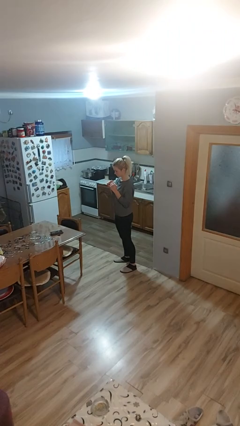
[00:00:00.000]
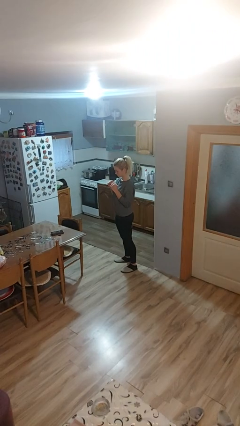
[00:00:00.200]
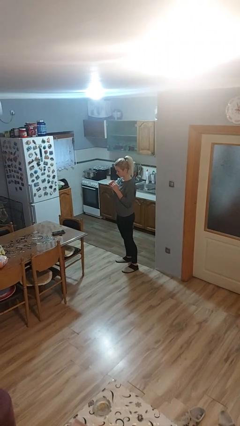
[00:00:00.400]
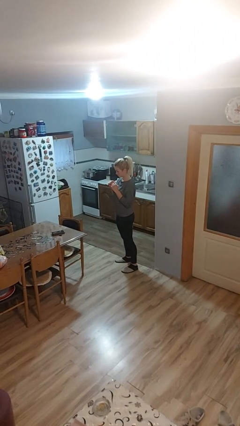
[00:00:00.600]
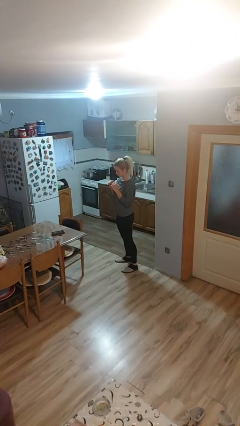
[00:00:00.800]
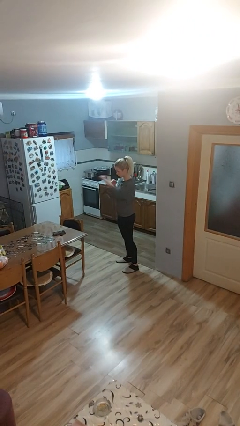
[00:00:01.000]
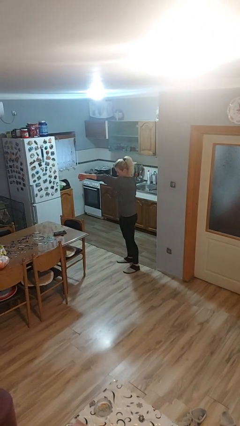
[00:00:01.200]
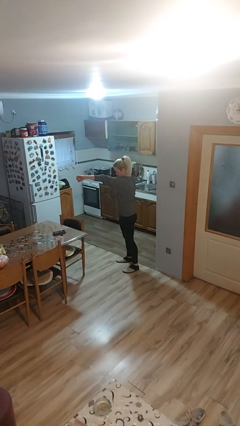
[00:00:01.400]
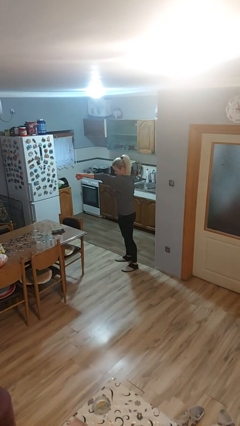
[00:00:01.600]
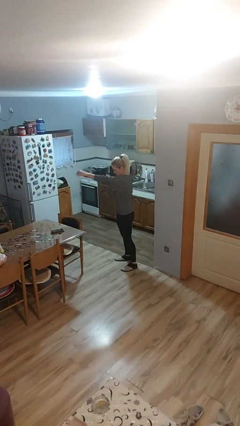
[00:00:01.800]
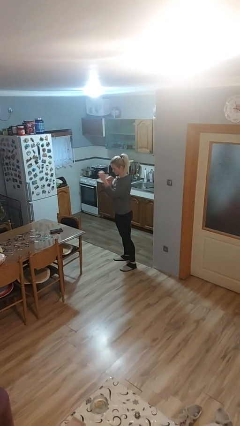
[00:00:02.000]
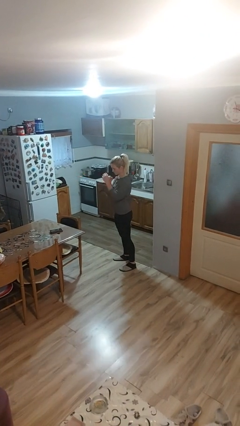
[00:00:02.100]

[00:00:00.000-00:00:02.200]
person punches

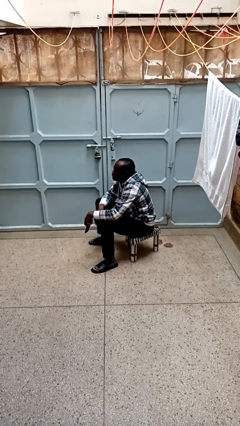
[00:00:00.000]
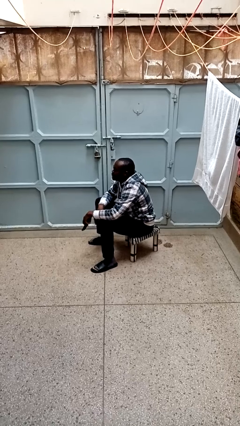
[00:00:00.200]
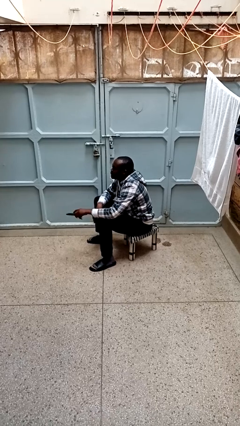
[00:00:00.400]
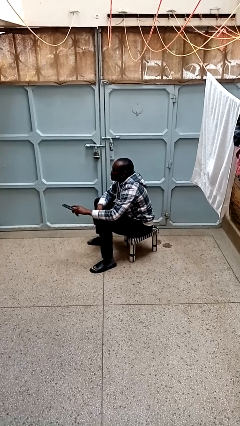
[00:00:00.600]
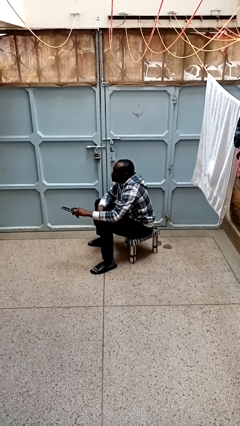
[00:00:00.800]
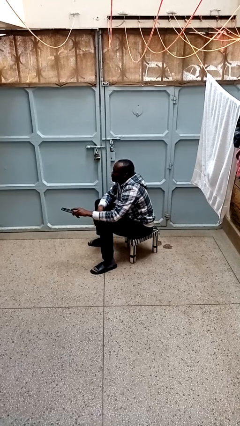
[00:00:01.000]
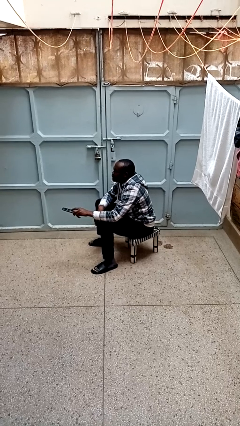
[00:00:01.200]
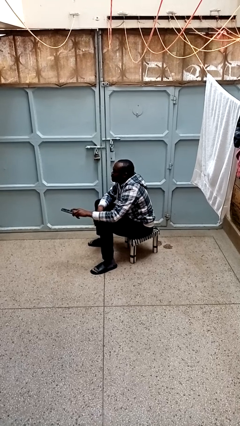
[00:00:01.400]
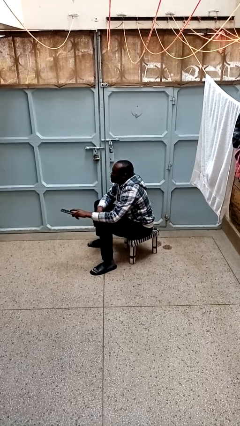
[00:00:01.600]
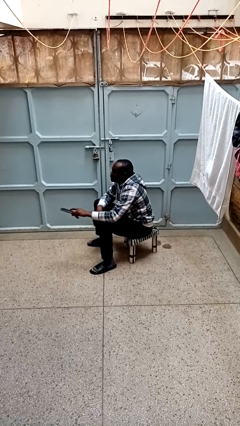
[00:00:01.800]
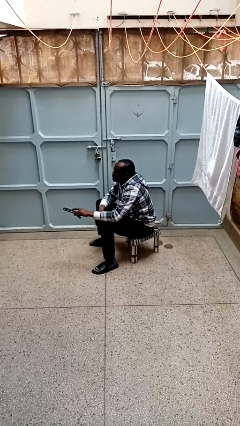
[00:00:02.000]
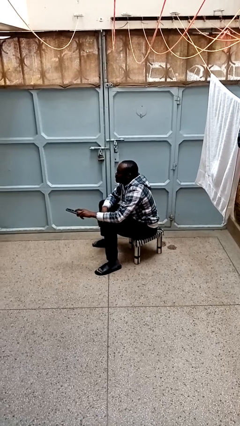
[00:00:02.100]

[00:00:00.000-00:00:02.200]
person uses television remote

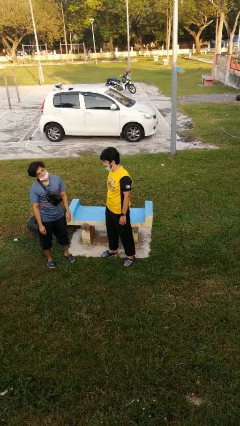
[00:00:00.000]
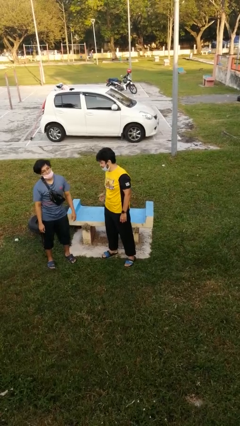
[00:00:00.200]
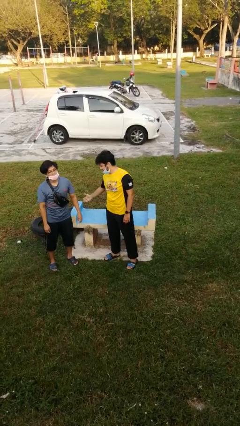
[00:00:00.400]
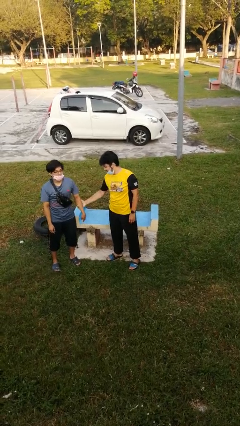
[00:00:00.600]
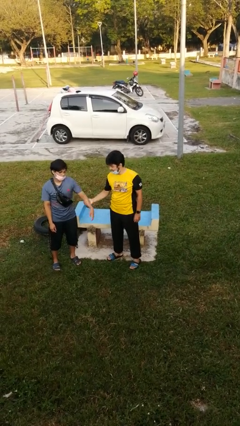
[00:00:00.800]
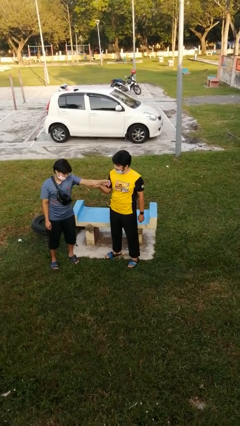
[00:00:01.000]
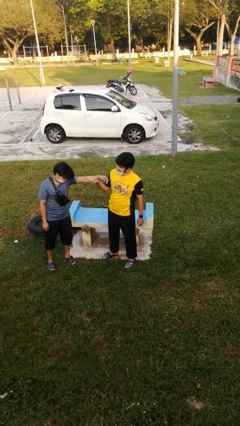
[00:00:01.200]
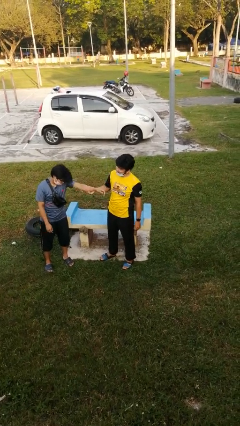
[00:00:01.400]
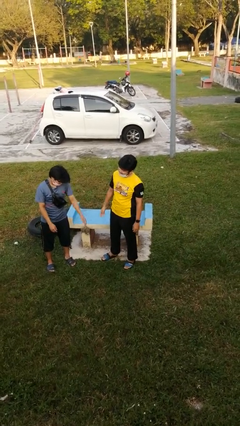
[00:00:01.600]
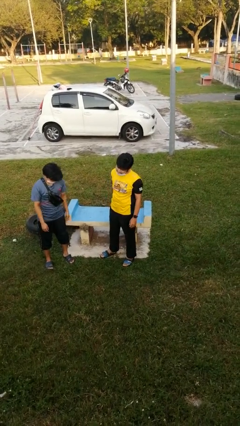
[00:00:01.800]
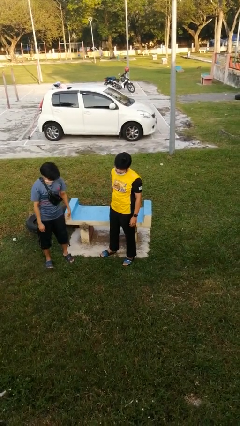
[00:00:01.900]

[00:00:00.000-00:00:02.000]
person grabs person by forearm

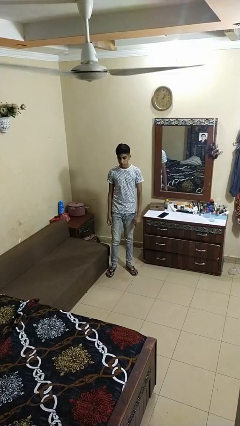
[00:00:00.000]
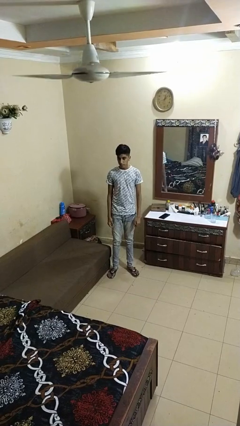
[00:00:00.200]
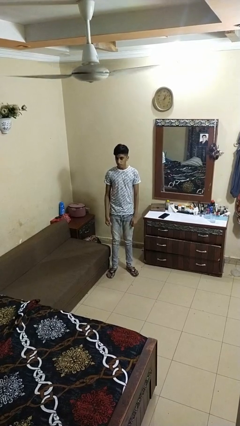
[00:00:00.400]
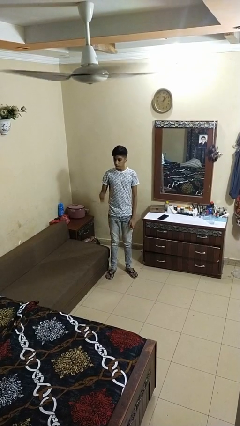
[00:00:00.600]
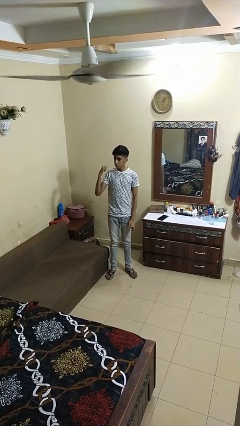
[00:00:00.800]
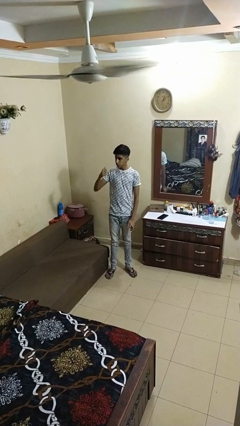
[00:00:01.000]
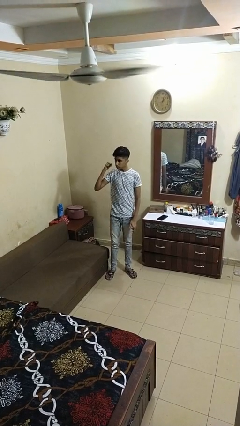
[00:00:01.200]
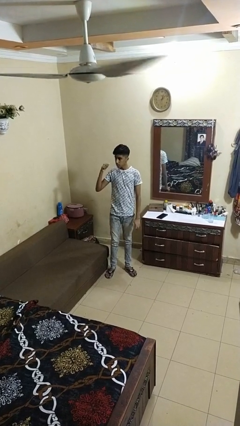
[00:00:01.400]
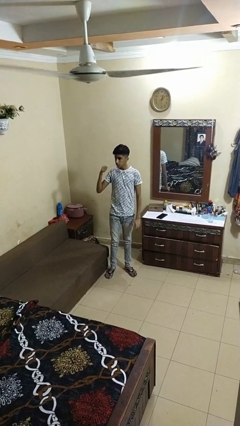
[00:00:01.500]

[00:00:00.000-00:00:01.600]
person gestures behind me

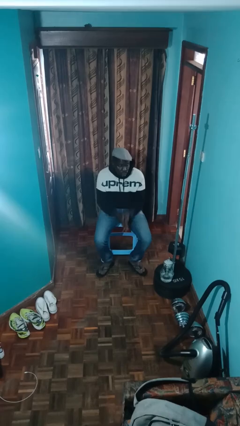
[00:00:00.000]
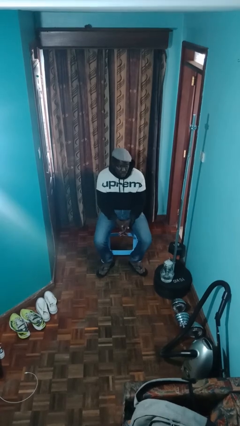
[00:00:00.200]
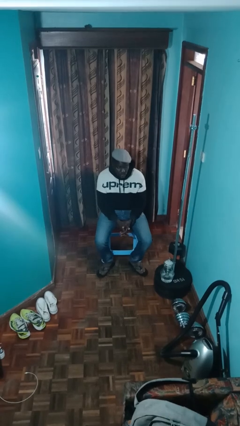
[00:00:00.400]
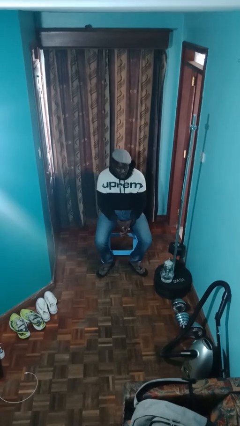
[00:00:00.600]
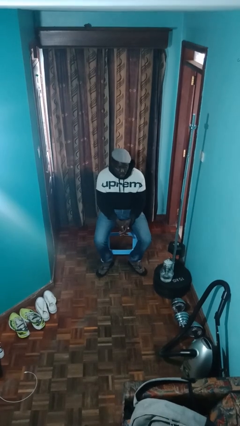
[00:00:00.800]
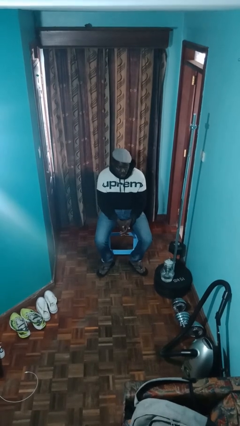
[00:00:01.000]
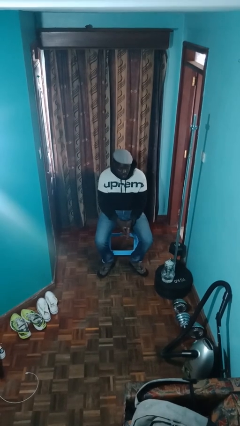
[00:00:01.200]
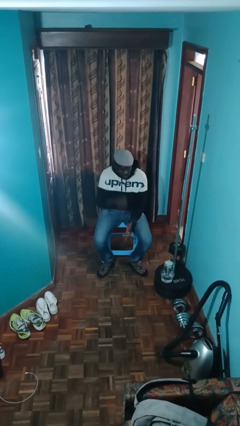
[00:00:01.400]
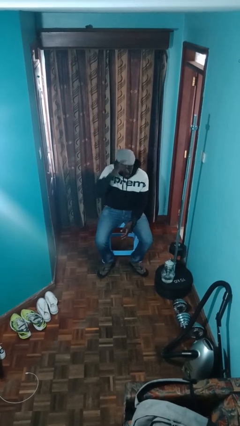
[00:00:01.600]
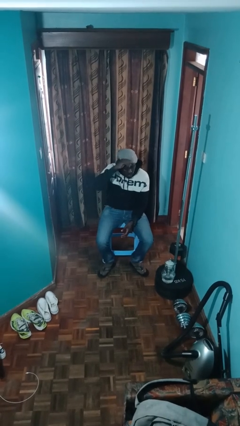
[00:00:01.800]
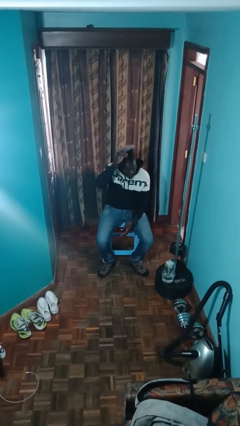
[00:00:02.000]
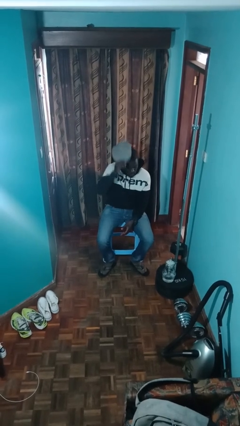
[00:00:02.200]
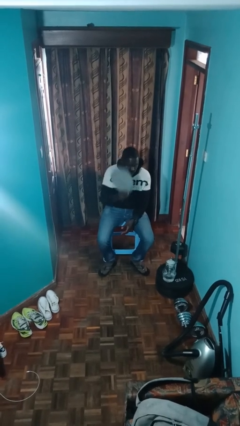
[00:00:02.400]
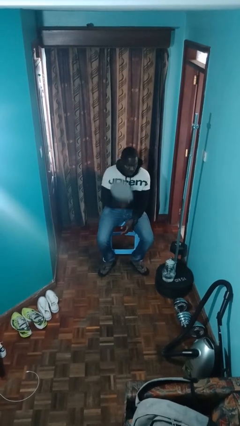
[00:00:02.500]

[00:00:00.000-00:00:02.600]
person takes off hat

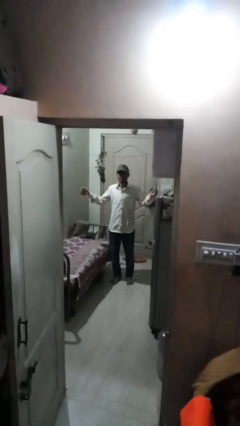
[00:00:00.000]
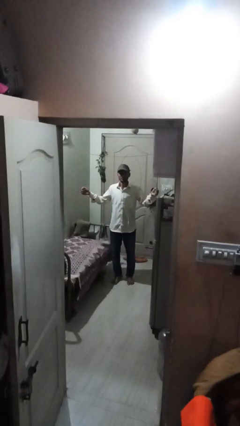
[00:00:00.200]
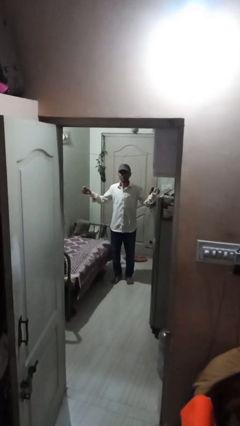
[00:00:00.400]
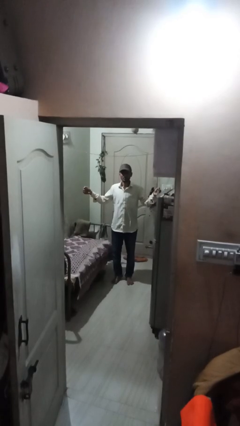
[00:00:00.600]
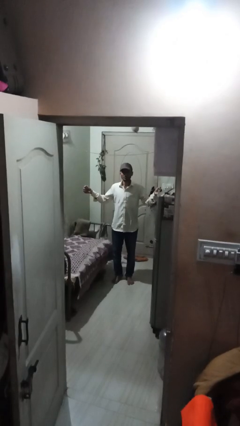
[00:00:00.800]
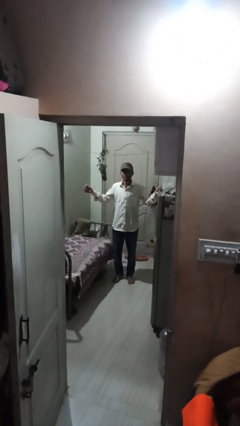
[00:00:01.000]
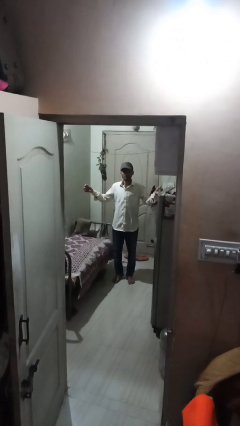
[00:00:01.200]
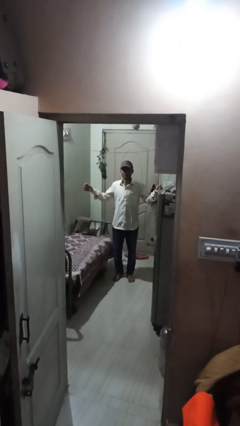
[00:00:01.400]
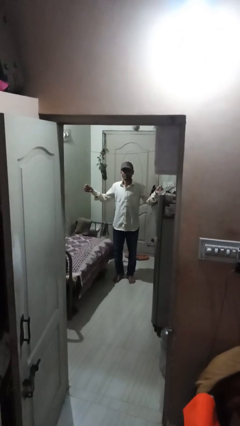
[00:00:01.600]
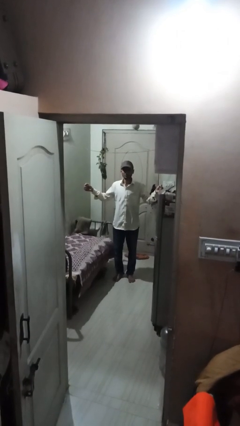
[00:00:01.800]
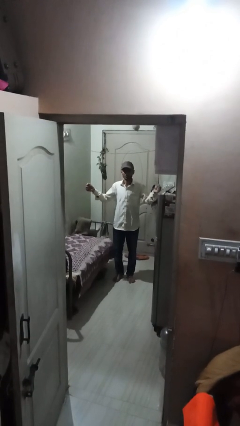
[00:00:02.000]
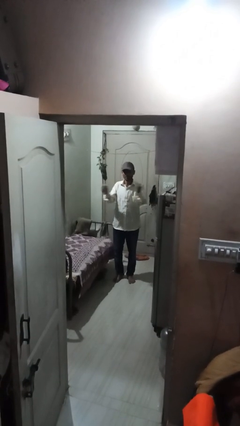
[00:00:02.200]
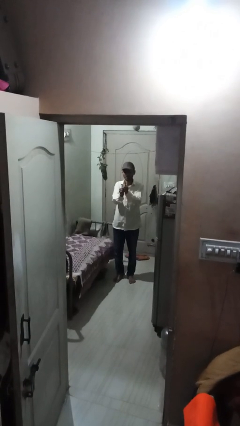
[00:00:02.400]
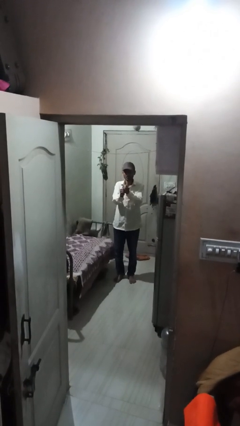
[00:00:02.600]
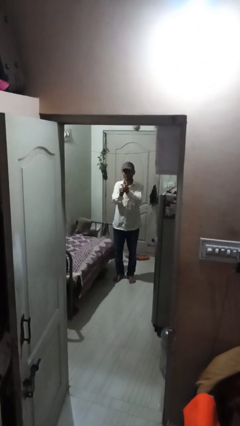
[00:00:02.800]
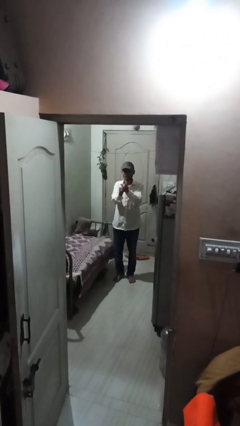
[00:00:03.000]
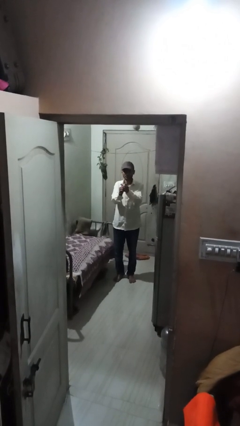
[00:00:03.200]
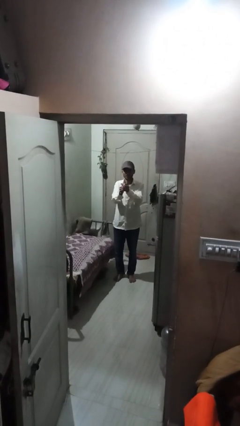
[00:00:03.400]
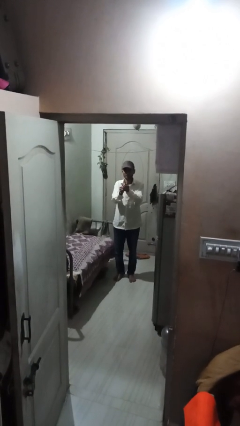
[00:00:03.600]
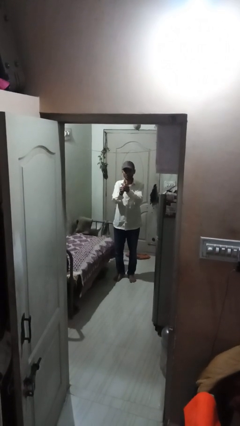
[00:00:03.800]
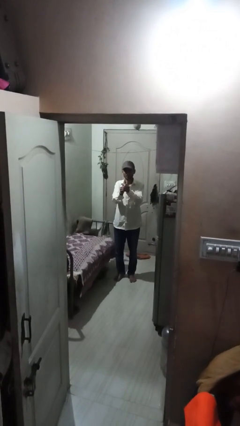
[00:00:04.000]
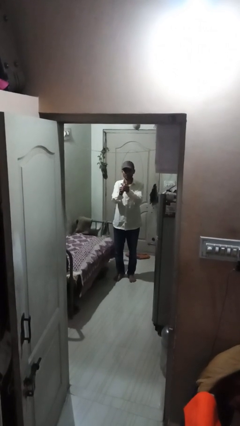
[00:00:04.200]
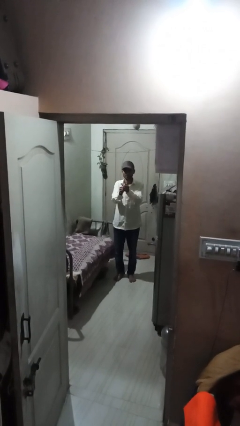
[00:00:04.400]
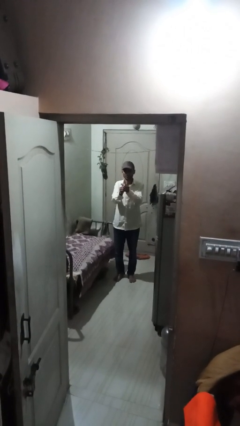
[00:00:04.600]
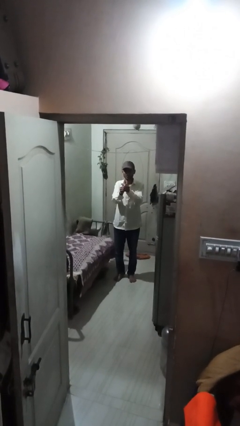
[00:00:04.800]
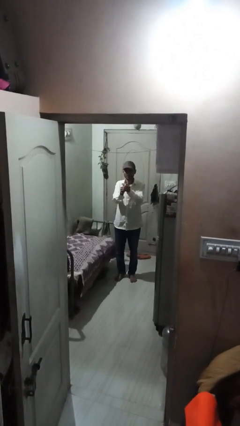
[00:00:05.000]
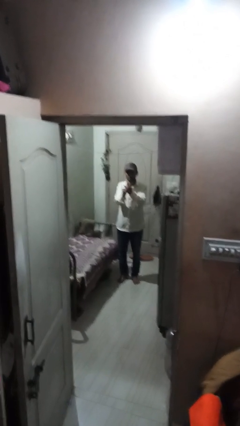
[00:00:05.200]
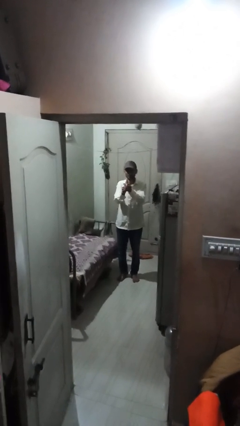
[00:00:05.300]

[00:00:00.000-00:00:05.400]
person gestures zoom in

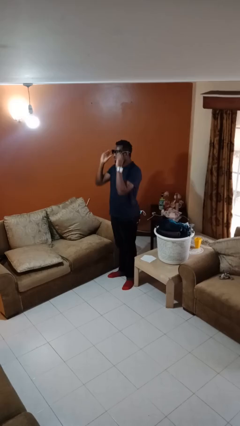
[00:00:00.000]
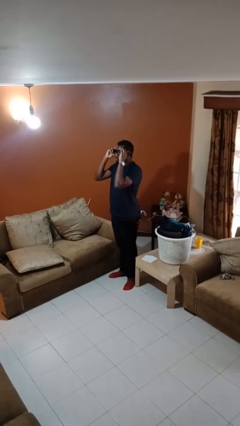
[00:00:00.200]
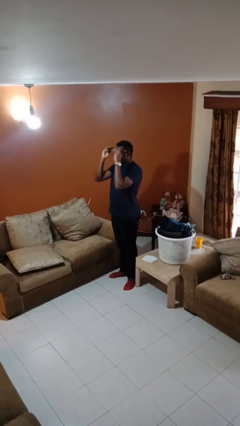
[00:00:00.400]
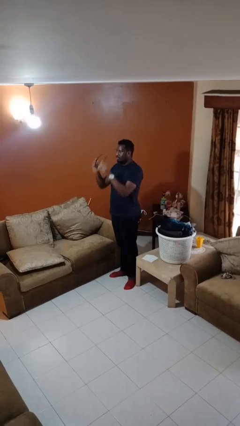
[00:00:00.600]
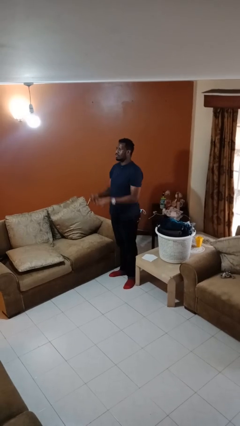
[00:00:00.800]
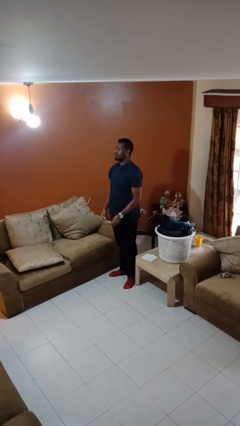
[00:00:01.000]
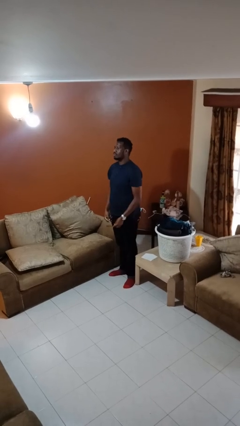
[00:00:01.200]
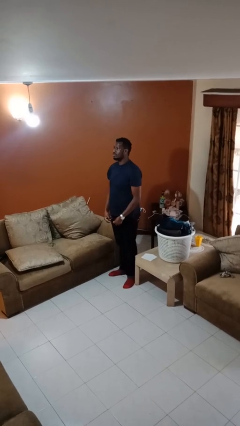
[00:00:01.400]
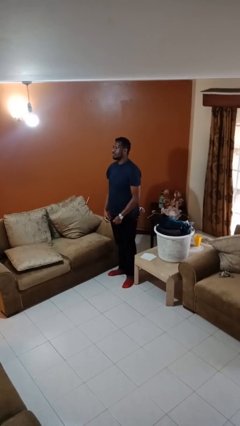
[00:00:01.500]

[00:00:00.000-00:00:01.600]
person takes off glasses
